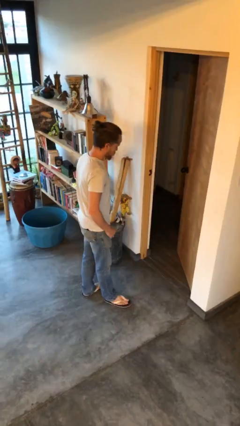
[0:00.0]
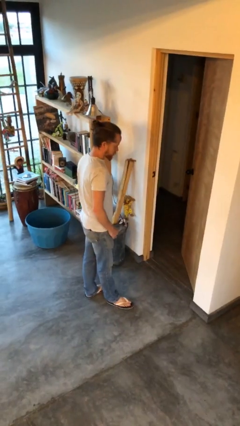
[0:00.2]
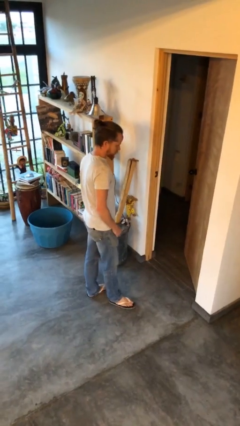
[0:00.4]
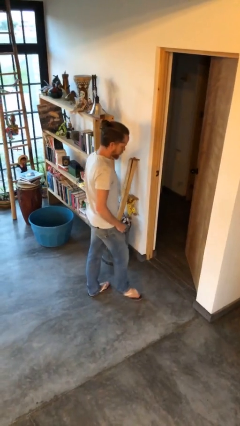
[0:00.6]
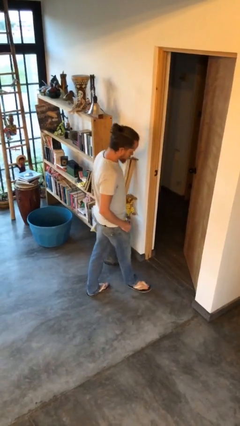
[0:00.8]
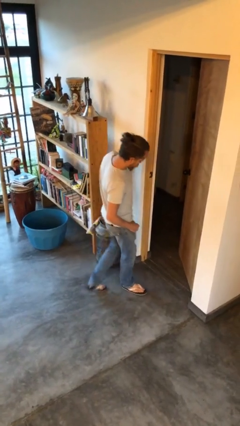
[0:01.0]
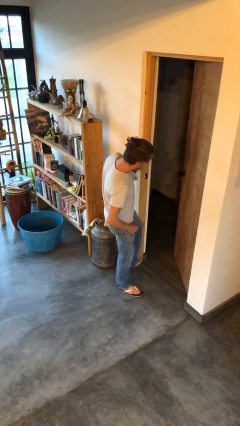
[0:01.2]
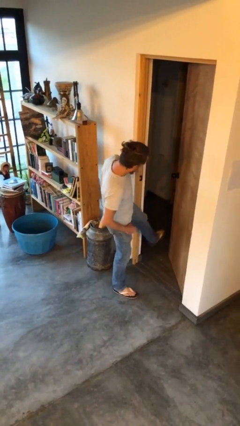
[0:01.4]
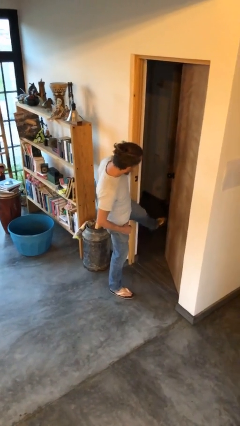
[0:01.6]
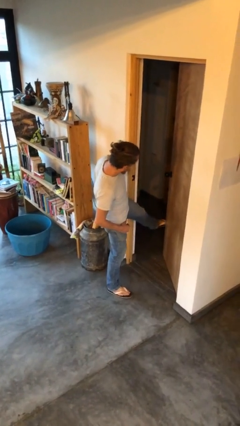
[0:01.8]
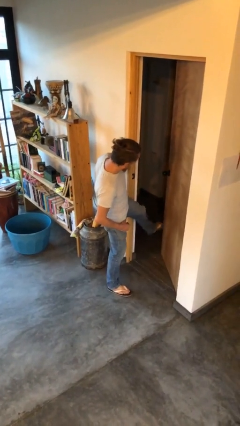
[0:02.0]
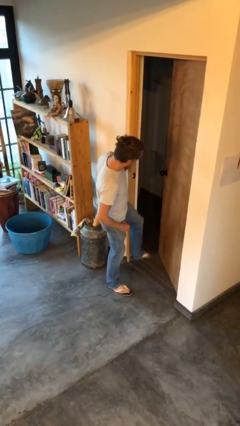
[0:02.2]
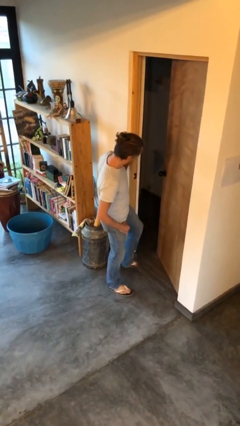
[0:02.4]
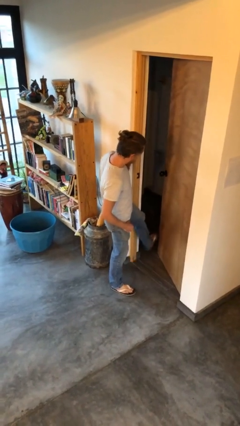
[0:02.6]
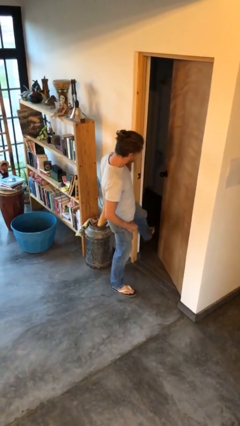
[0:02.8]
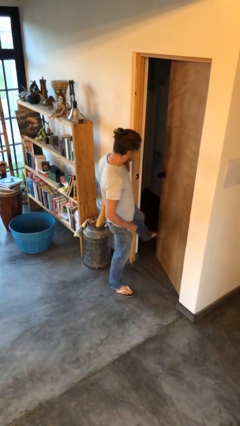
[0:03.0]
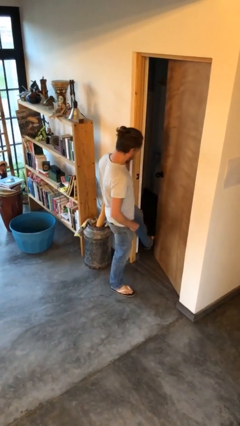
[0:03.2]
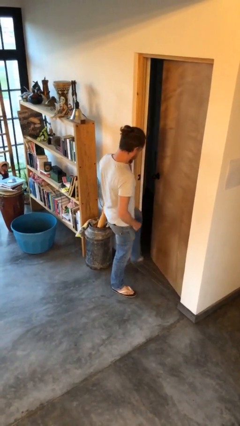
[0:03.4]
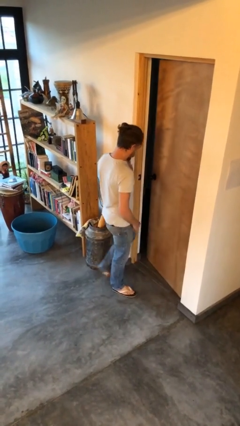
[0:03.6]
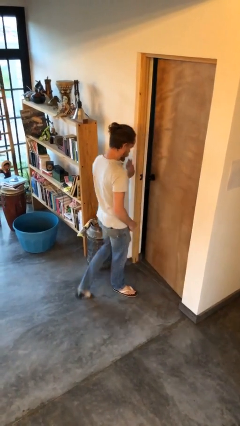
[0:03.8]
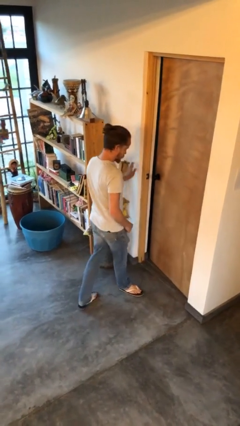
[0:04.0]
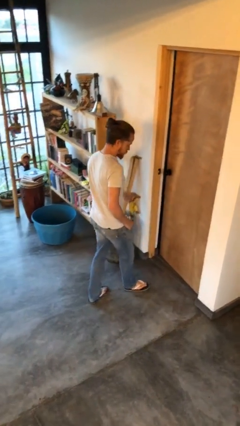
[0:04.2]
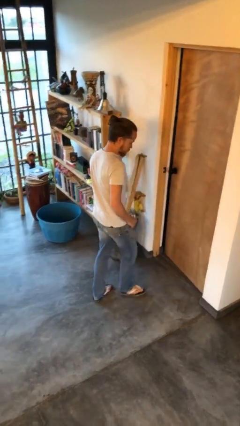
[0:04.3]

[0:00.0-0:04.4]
person closes door with foot

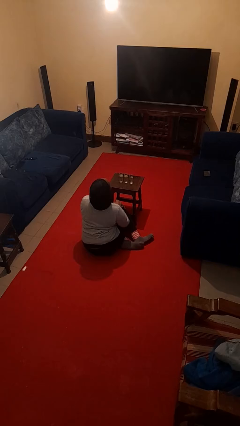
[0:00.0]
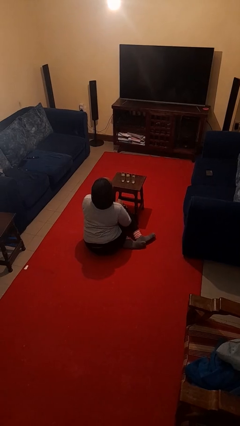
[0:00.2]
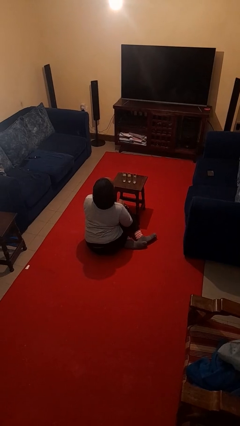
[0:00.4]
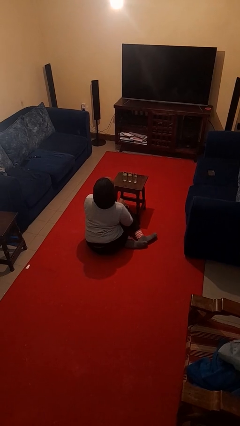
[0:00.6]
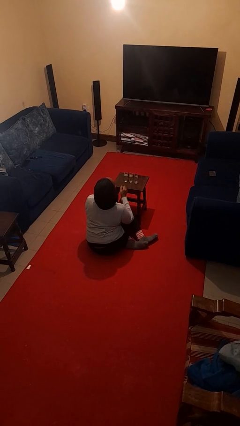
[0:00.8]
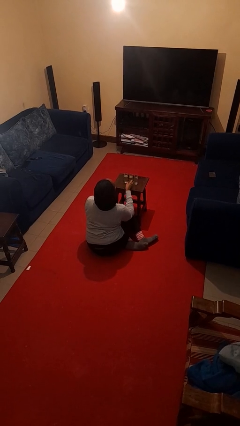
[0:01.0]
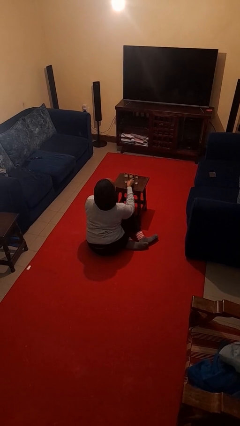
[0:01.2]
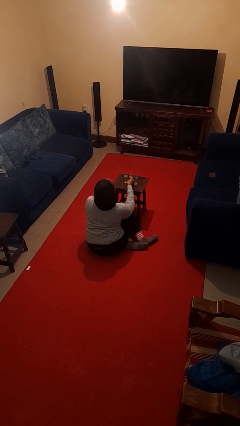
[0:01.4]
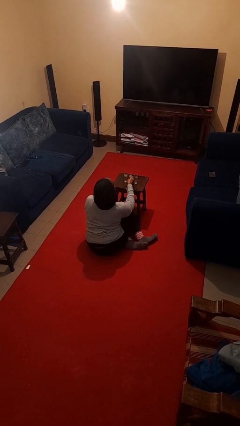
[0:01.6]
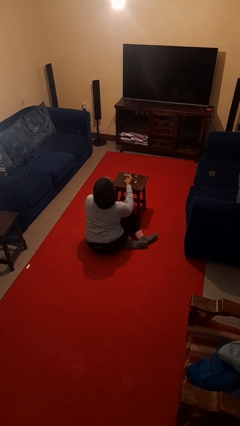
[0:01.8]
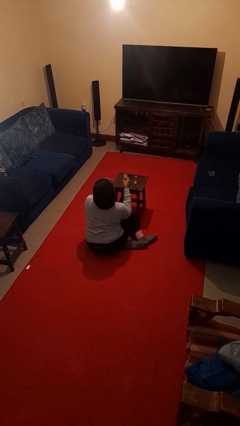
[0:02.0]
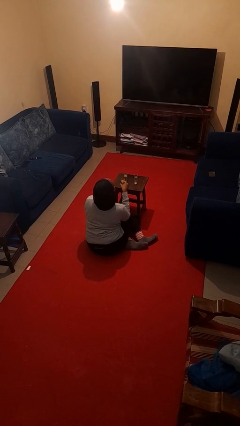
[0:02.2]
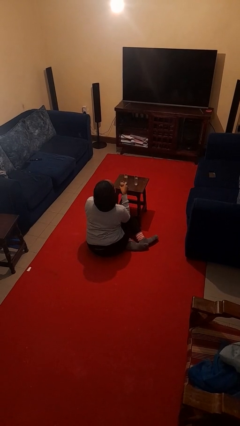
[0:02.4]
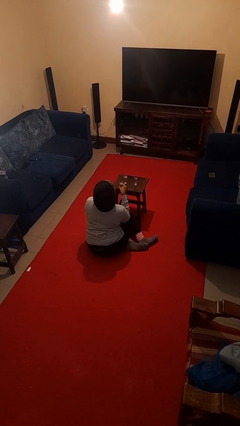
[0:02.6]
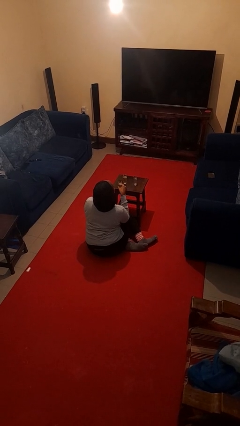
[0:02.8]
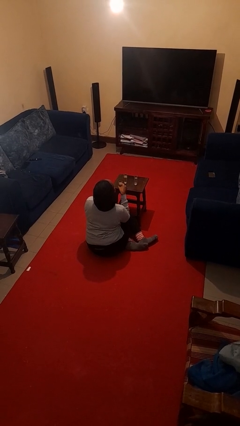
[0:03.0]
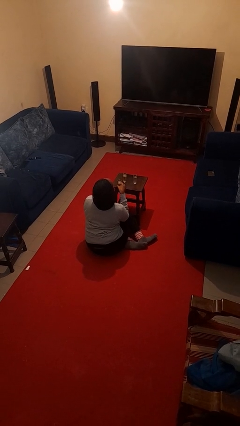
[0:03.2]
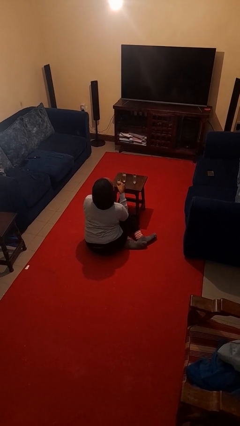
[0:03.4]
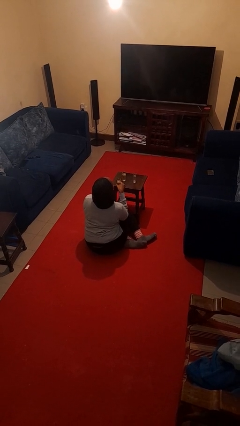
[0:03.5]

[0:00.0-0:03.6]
person picks up object from table

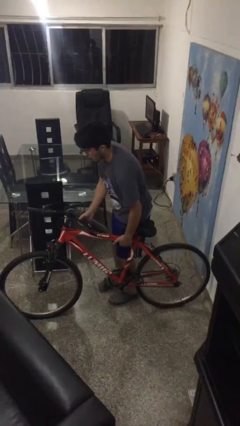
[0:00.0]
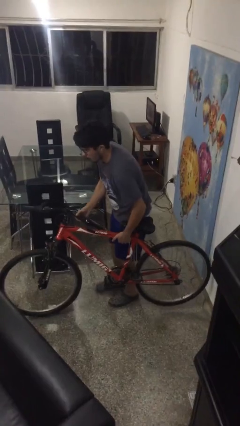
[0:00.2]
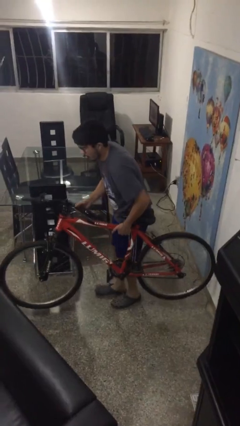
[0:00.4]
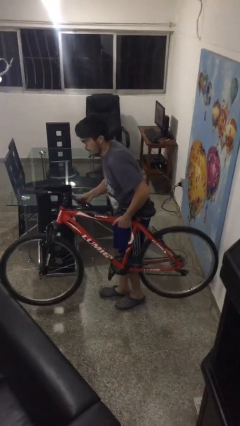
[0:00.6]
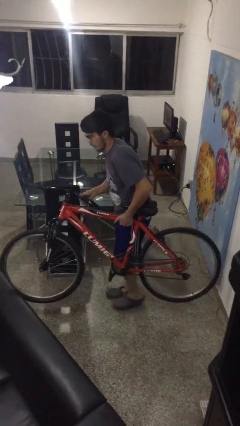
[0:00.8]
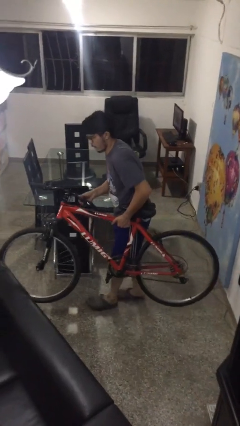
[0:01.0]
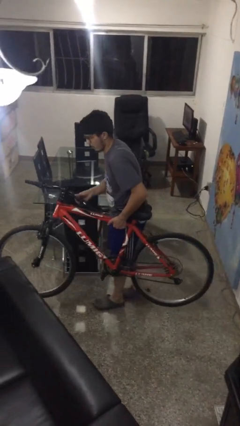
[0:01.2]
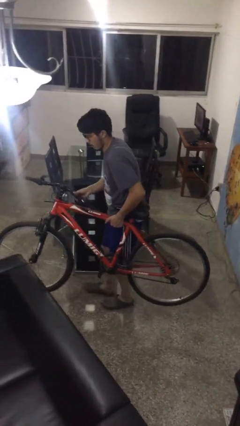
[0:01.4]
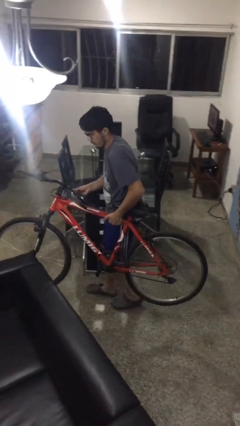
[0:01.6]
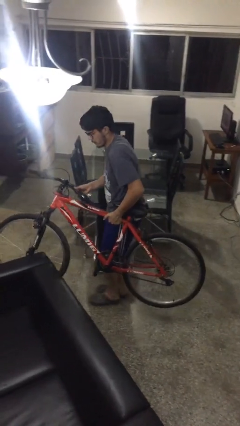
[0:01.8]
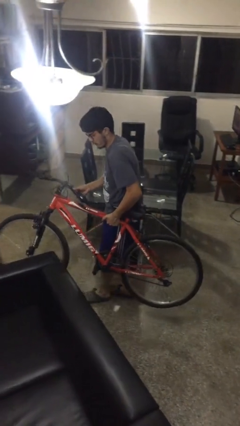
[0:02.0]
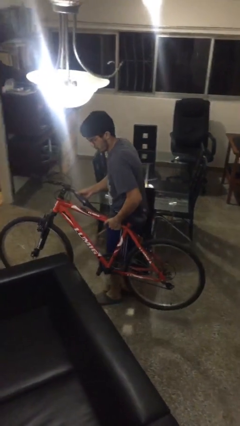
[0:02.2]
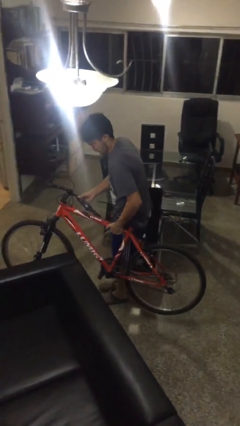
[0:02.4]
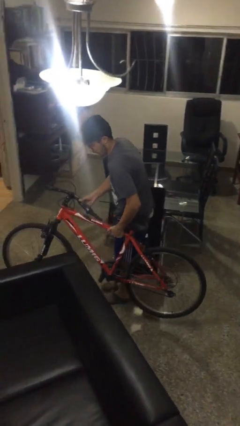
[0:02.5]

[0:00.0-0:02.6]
person carries bicycle

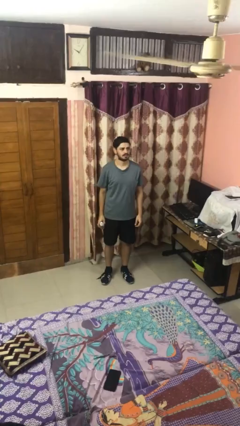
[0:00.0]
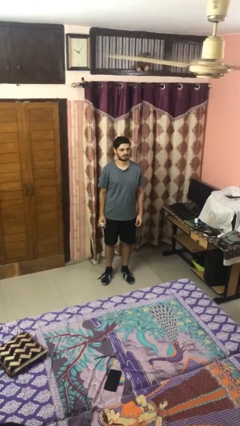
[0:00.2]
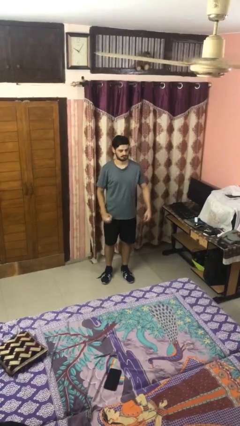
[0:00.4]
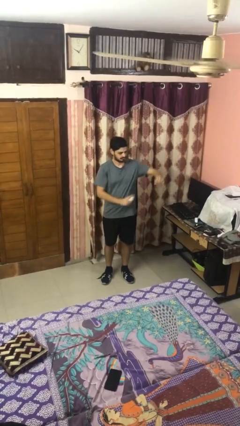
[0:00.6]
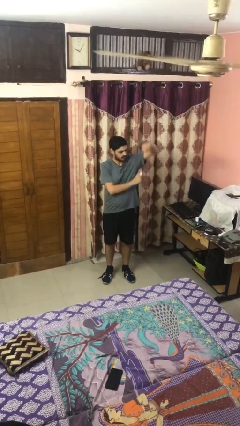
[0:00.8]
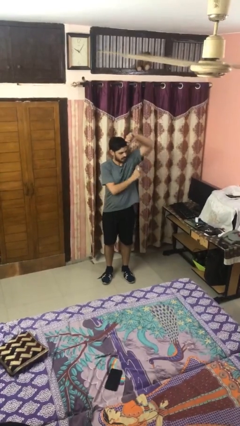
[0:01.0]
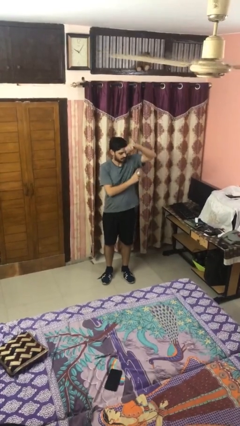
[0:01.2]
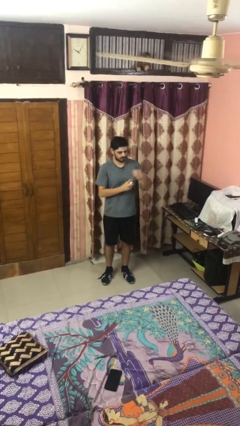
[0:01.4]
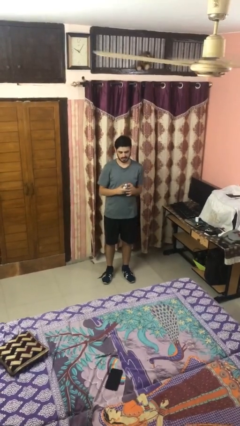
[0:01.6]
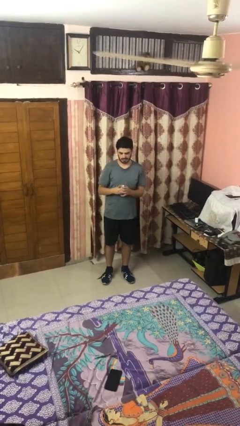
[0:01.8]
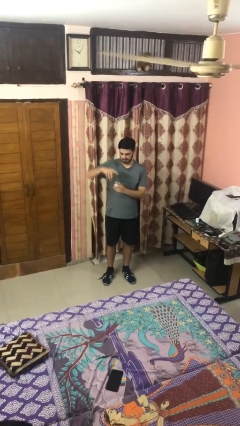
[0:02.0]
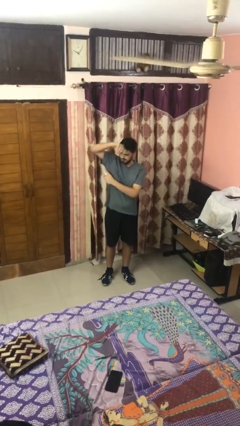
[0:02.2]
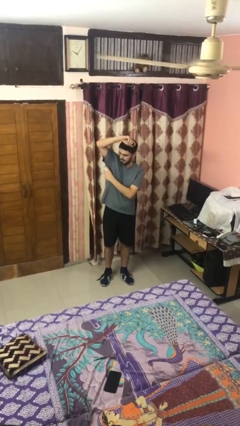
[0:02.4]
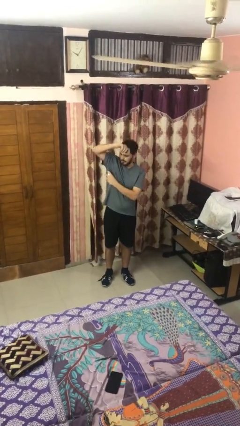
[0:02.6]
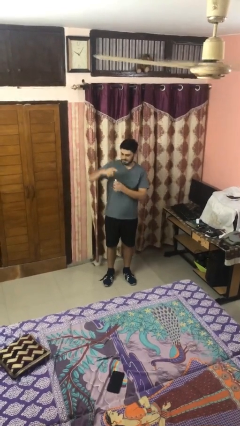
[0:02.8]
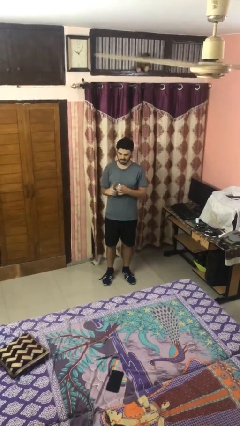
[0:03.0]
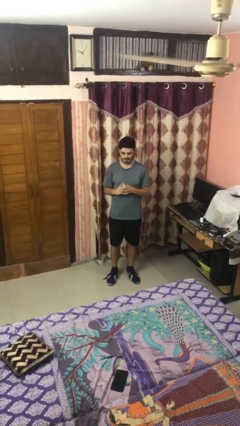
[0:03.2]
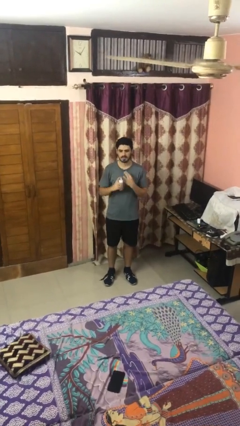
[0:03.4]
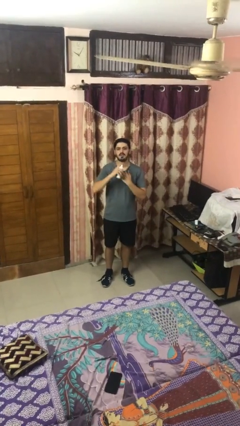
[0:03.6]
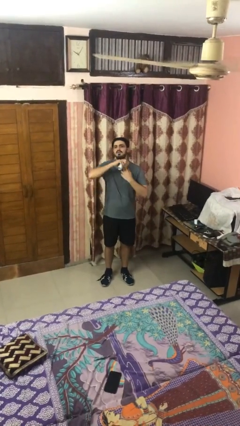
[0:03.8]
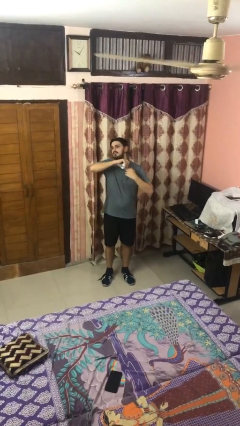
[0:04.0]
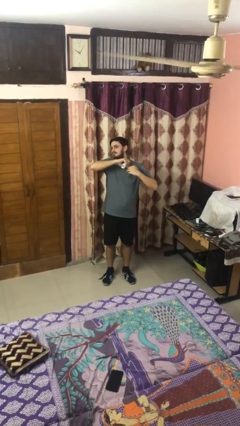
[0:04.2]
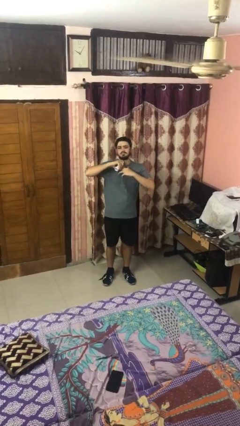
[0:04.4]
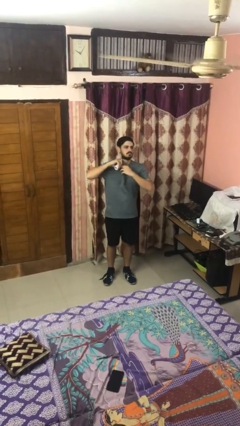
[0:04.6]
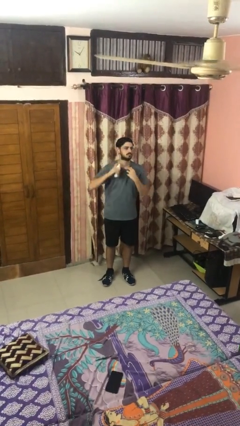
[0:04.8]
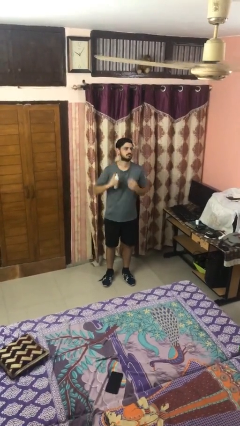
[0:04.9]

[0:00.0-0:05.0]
person applies deodorant

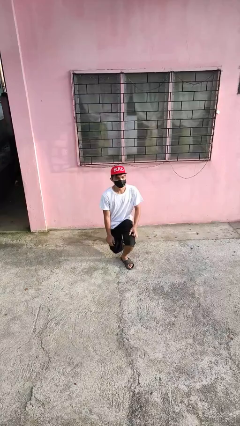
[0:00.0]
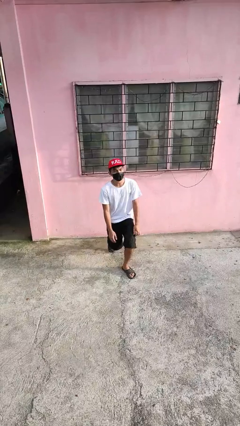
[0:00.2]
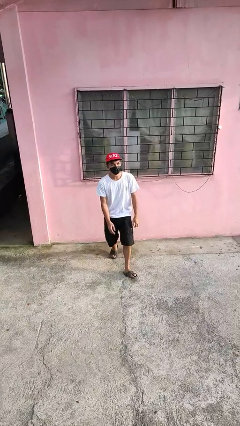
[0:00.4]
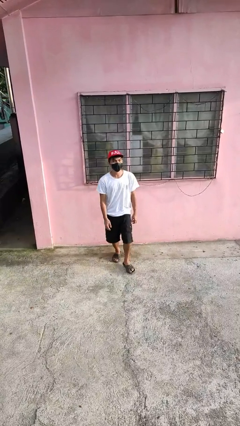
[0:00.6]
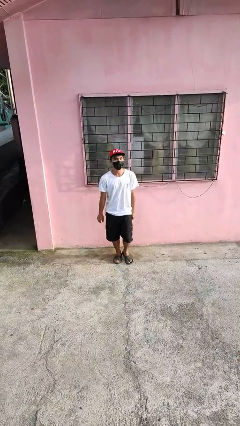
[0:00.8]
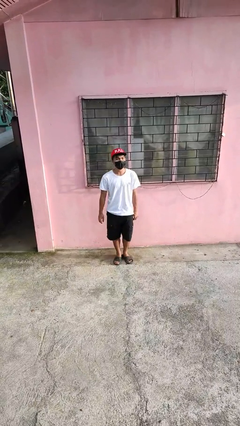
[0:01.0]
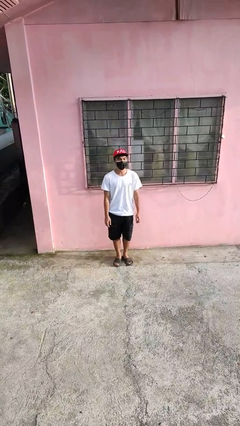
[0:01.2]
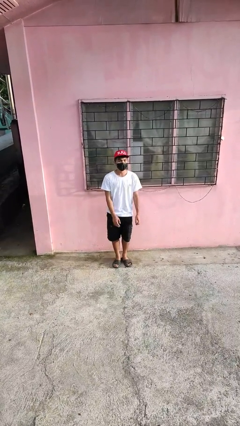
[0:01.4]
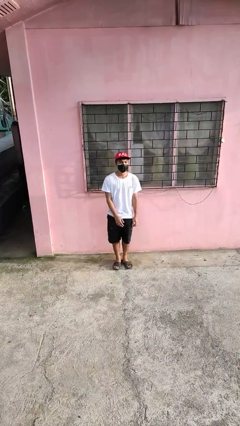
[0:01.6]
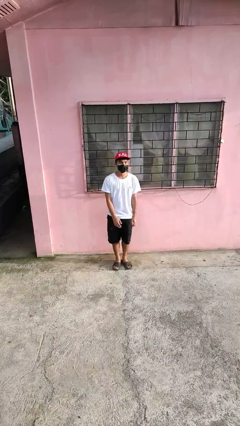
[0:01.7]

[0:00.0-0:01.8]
person stands up from floor
